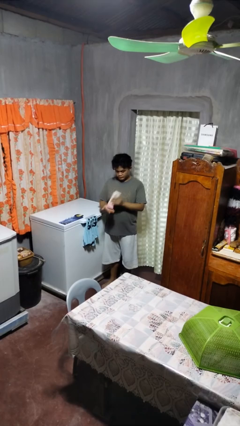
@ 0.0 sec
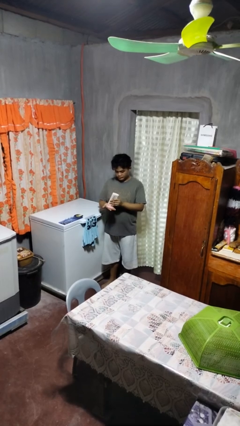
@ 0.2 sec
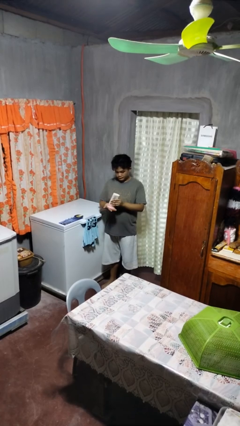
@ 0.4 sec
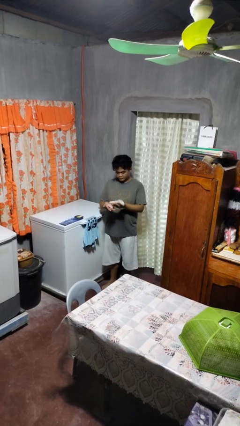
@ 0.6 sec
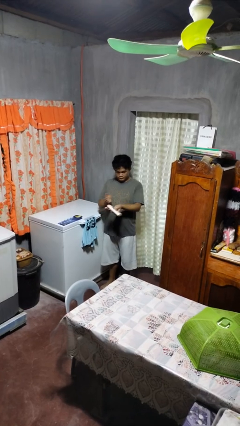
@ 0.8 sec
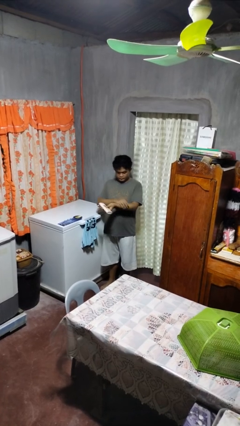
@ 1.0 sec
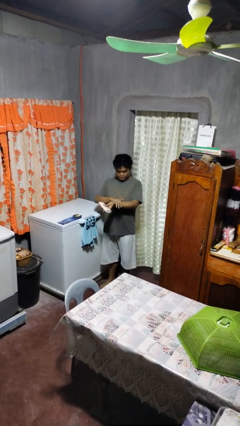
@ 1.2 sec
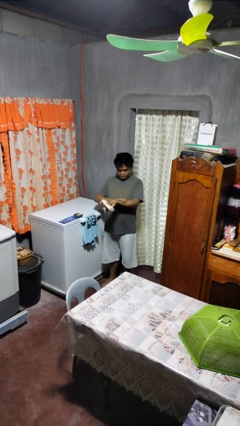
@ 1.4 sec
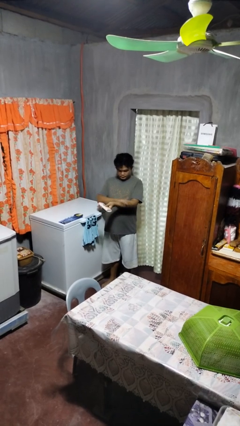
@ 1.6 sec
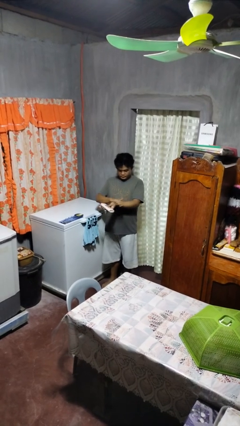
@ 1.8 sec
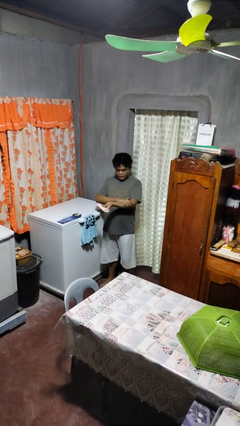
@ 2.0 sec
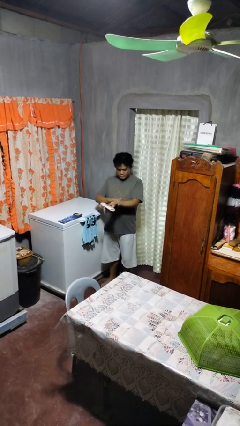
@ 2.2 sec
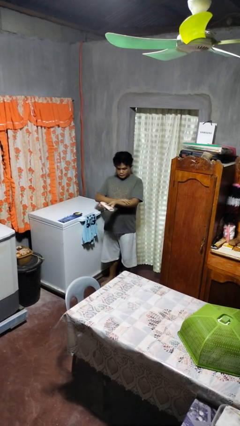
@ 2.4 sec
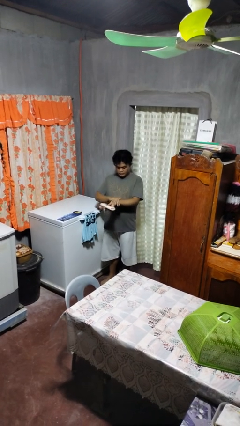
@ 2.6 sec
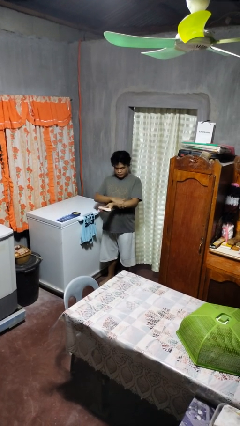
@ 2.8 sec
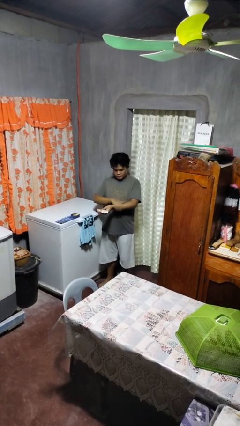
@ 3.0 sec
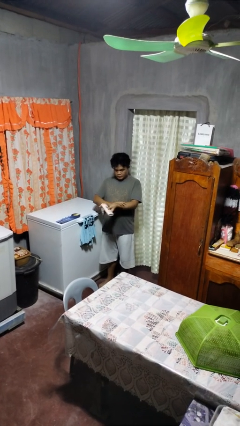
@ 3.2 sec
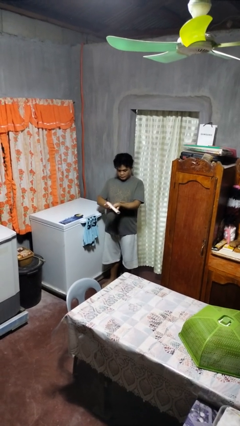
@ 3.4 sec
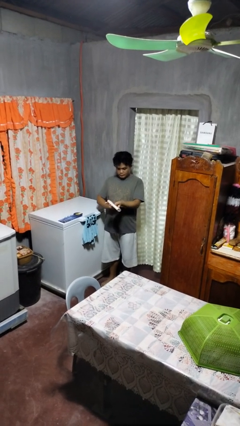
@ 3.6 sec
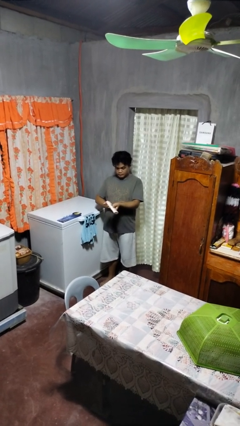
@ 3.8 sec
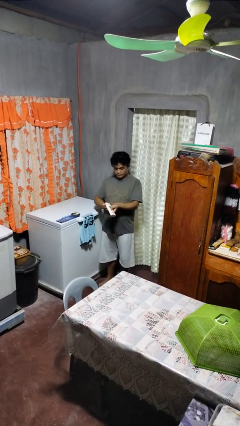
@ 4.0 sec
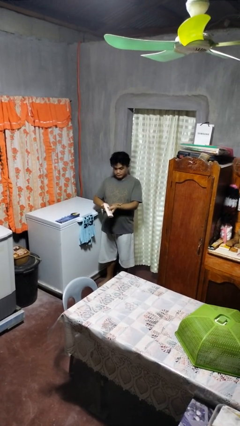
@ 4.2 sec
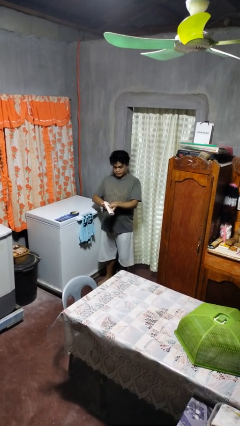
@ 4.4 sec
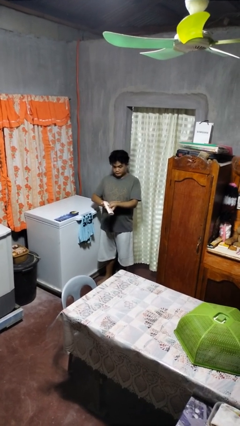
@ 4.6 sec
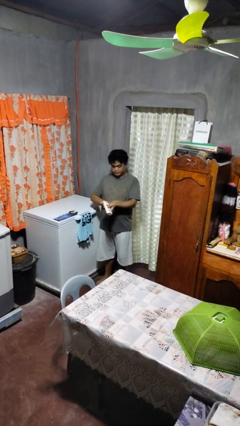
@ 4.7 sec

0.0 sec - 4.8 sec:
person applies sunscreen

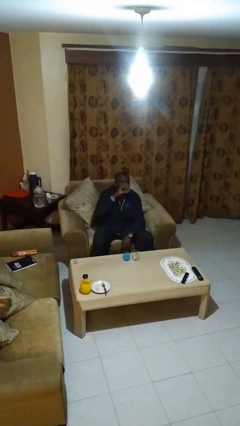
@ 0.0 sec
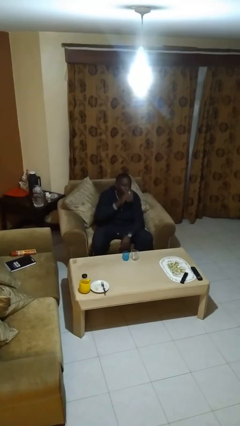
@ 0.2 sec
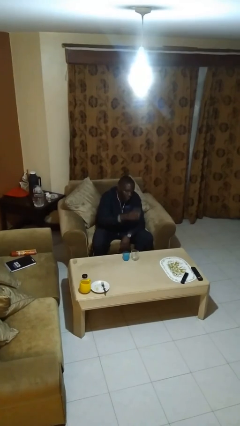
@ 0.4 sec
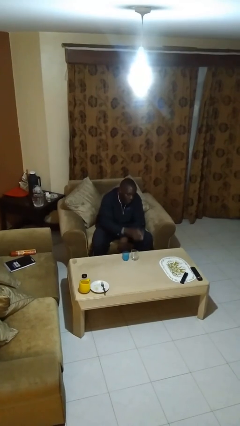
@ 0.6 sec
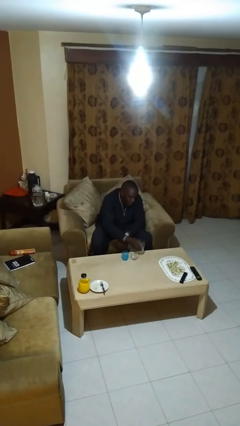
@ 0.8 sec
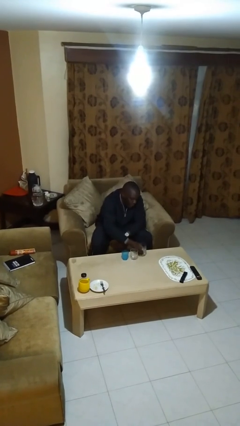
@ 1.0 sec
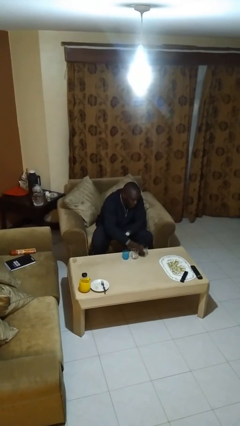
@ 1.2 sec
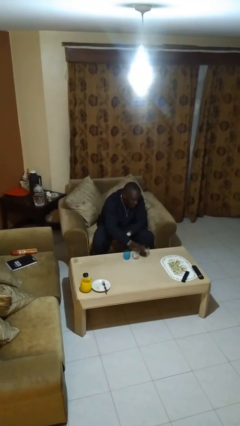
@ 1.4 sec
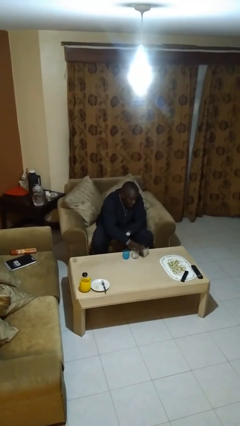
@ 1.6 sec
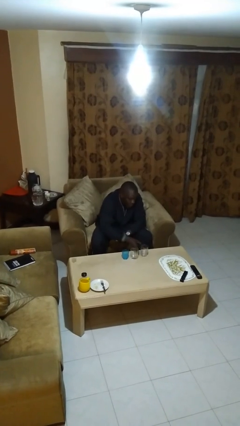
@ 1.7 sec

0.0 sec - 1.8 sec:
person puts down object on table

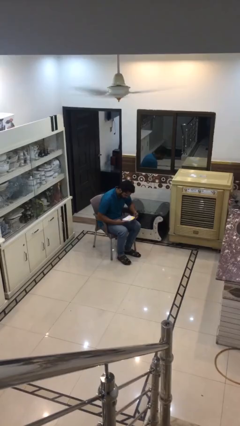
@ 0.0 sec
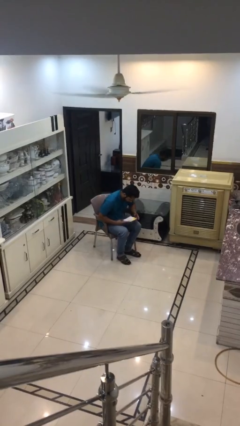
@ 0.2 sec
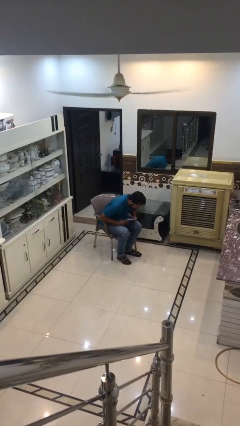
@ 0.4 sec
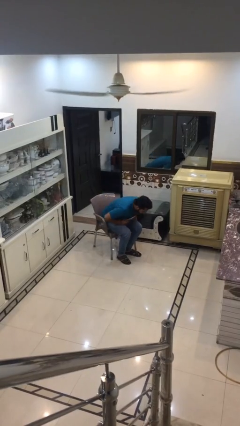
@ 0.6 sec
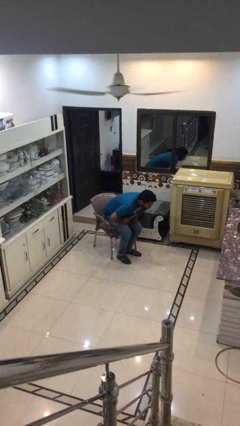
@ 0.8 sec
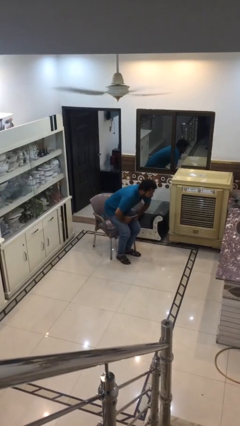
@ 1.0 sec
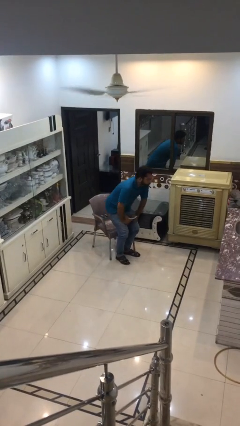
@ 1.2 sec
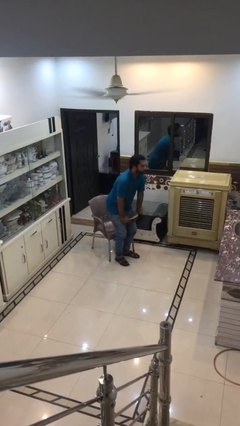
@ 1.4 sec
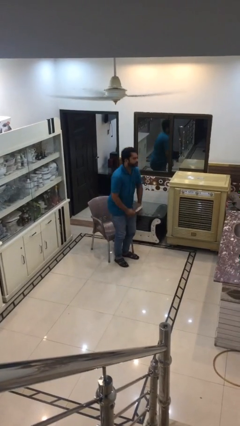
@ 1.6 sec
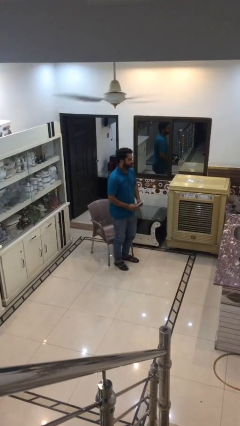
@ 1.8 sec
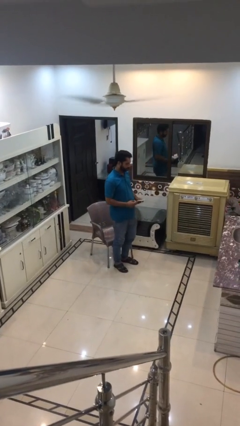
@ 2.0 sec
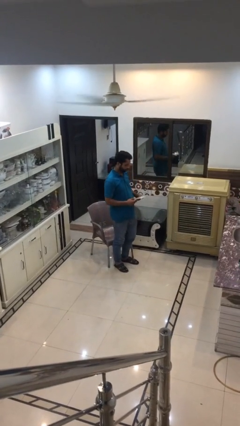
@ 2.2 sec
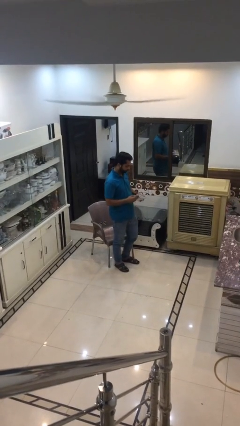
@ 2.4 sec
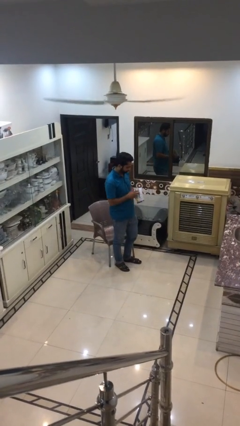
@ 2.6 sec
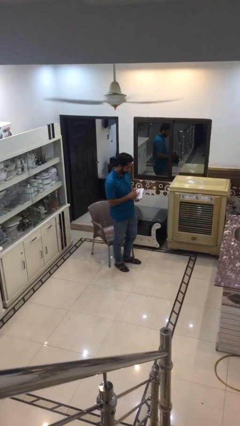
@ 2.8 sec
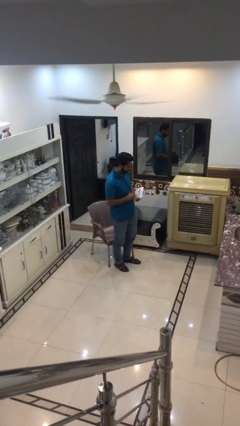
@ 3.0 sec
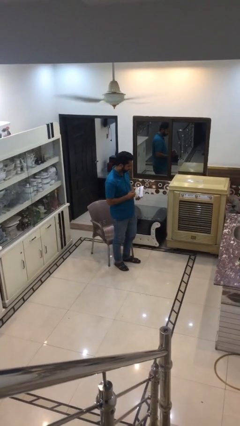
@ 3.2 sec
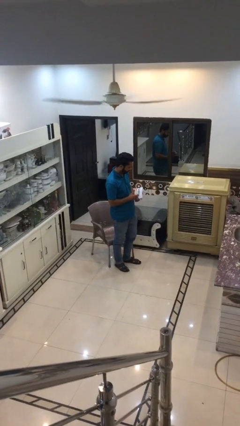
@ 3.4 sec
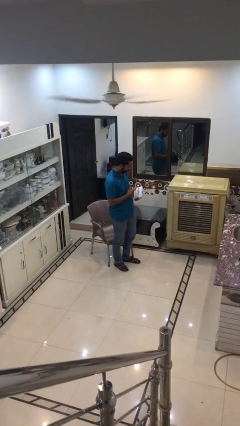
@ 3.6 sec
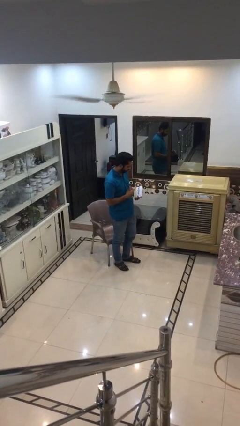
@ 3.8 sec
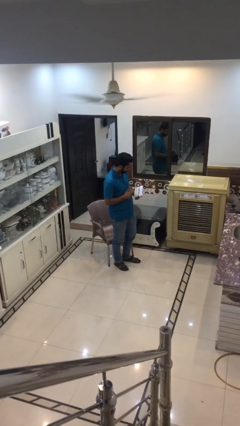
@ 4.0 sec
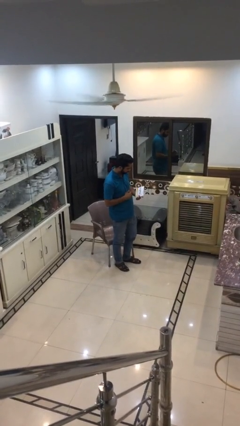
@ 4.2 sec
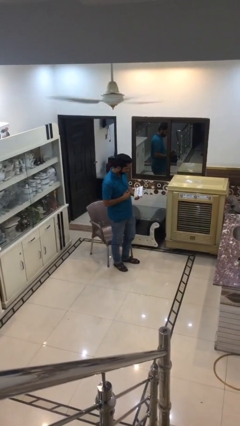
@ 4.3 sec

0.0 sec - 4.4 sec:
person stands up

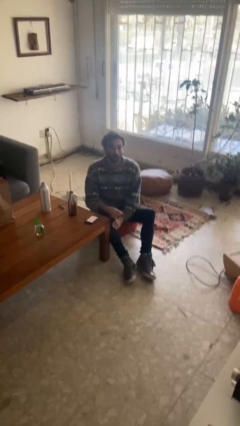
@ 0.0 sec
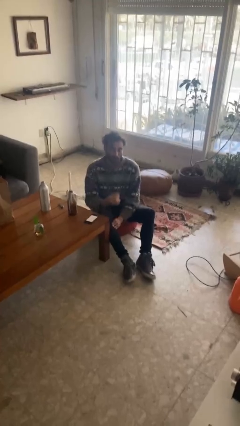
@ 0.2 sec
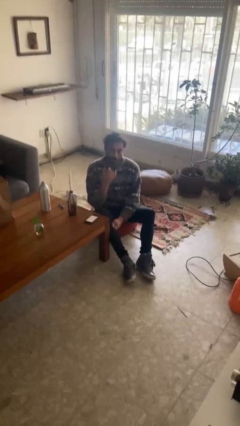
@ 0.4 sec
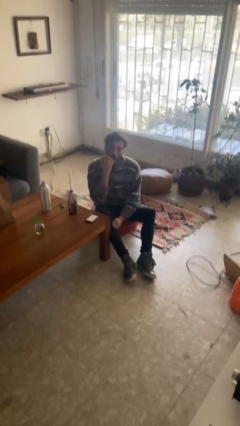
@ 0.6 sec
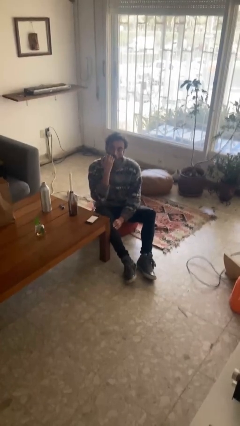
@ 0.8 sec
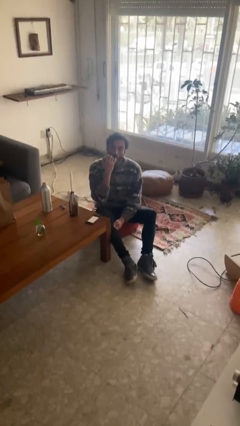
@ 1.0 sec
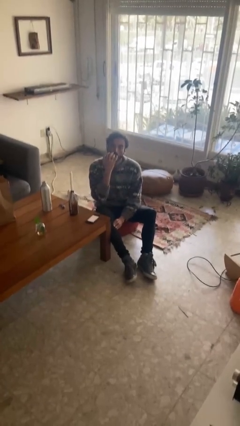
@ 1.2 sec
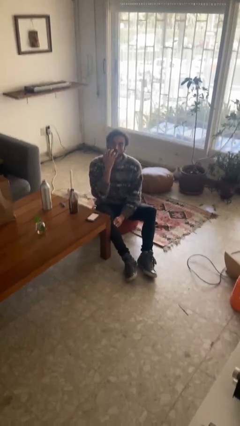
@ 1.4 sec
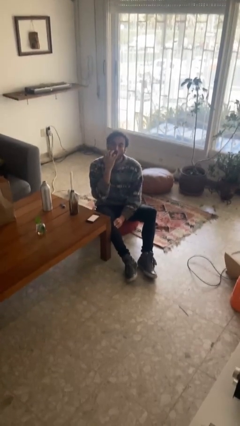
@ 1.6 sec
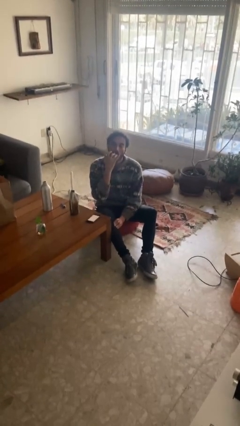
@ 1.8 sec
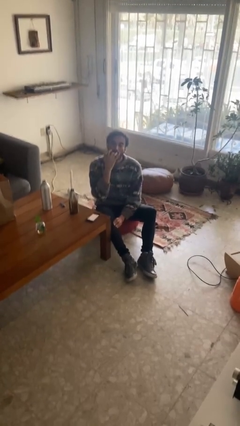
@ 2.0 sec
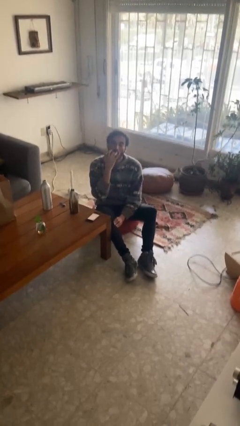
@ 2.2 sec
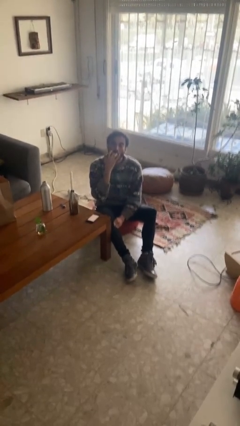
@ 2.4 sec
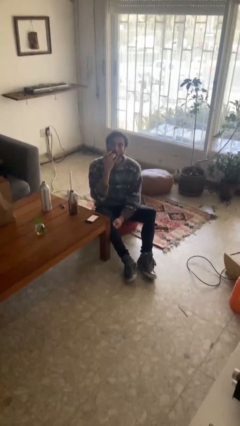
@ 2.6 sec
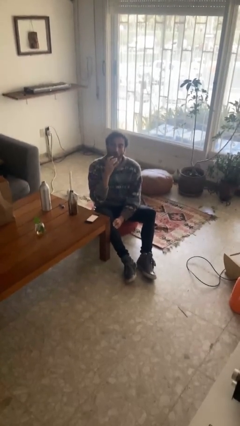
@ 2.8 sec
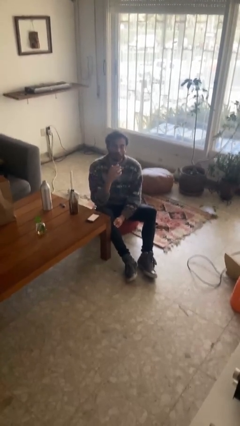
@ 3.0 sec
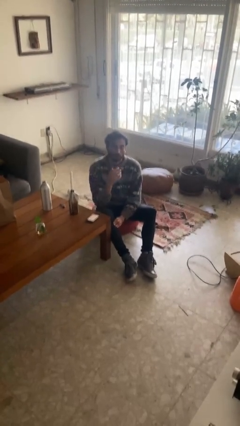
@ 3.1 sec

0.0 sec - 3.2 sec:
person licks fingers

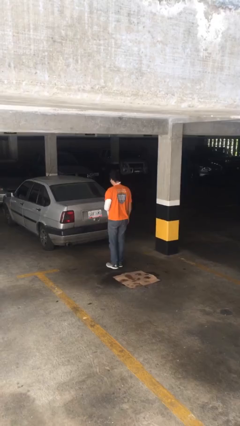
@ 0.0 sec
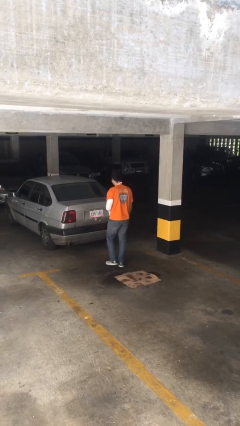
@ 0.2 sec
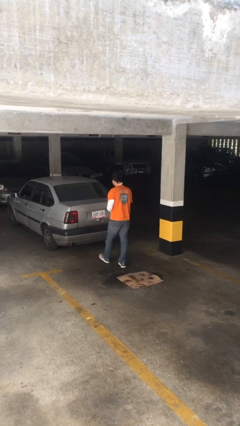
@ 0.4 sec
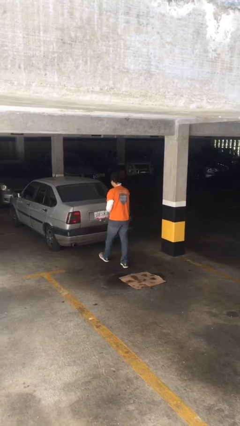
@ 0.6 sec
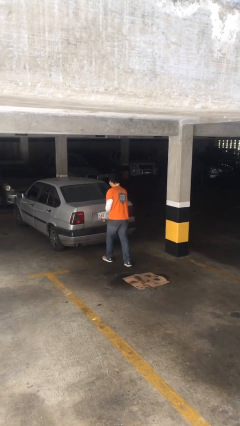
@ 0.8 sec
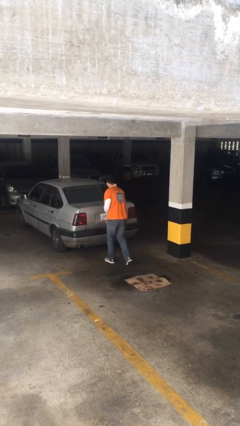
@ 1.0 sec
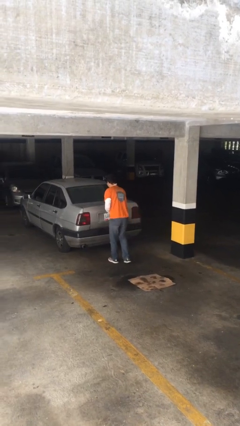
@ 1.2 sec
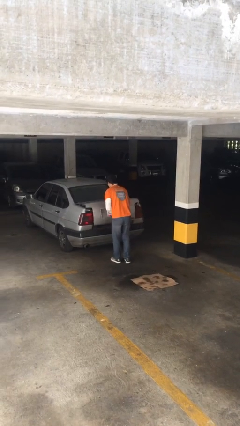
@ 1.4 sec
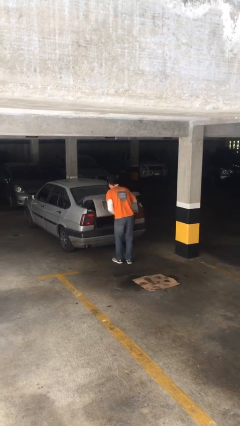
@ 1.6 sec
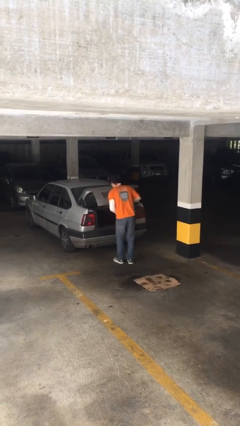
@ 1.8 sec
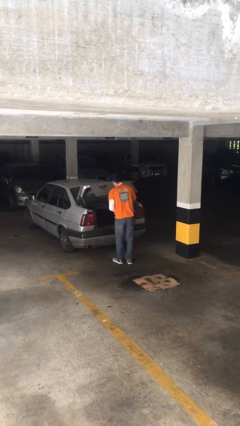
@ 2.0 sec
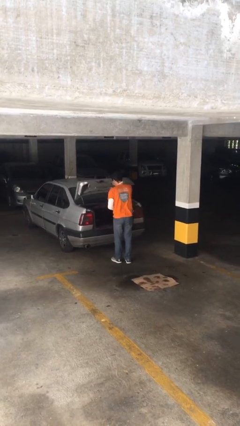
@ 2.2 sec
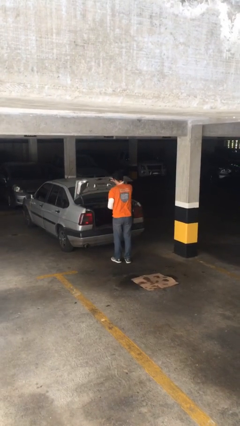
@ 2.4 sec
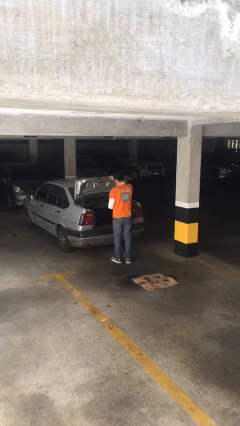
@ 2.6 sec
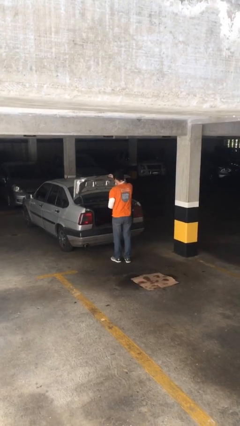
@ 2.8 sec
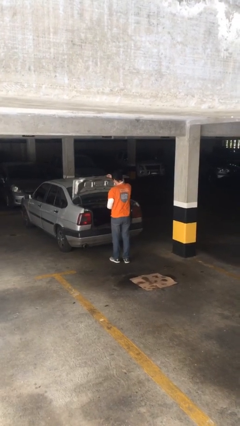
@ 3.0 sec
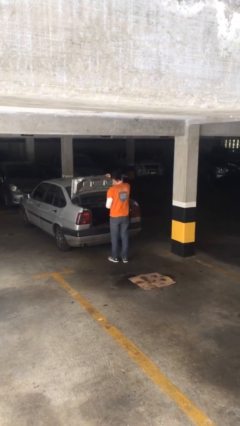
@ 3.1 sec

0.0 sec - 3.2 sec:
person opens car trunk
